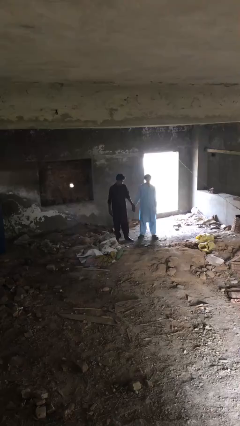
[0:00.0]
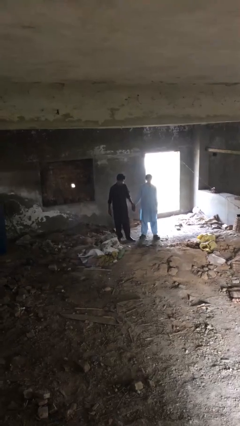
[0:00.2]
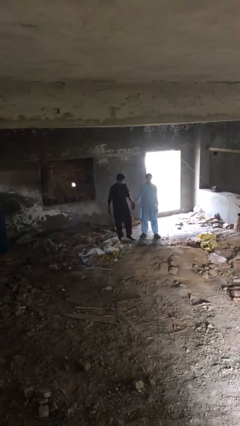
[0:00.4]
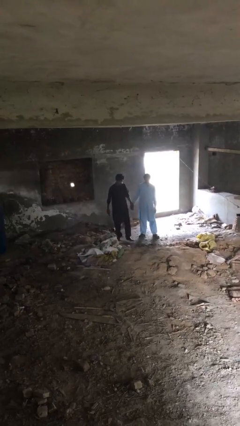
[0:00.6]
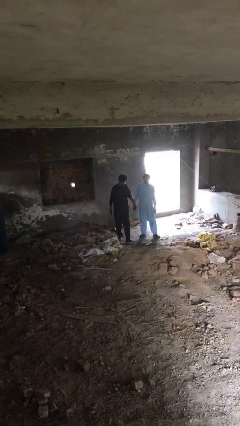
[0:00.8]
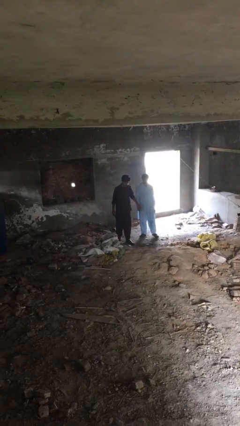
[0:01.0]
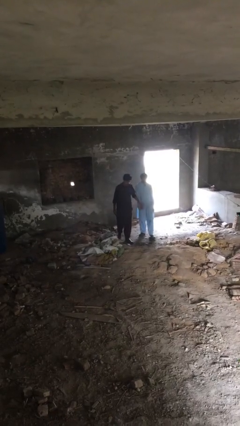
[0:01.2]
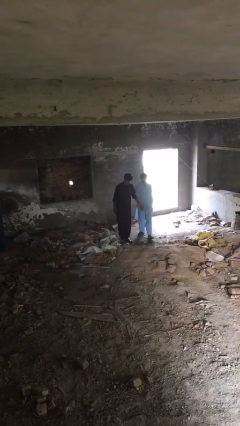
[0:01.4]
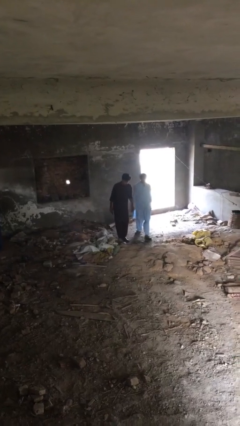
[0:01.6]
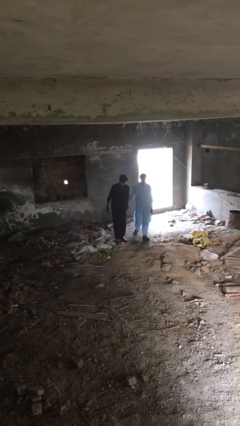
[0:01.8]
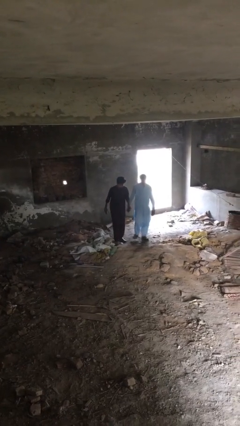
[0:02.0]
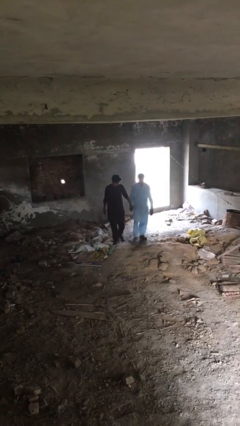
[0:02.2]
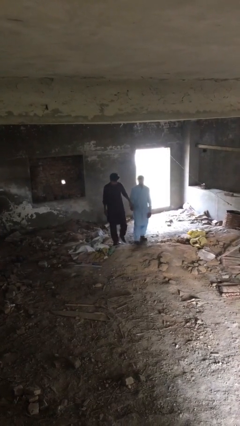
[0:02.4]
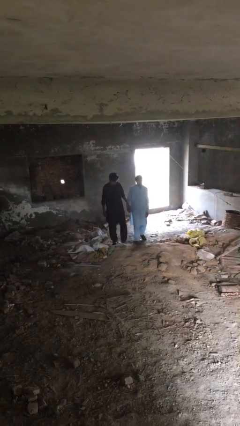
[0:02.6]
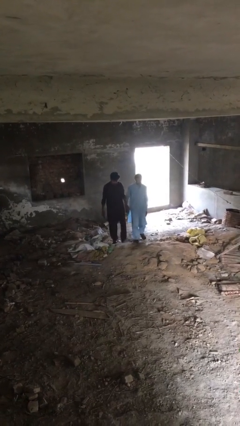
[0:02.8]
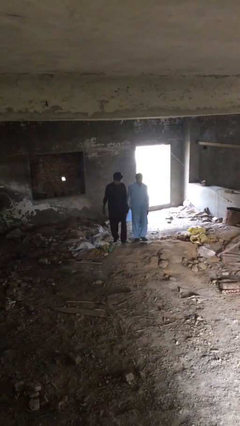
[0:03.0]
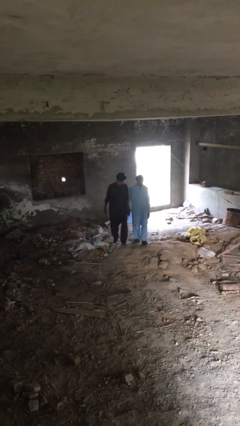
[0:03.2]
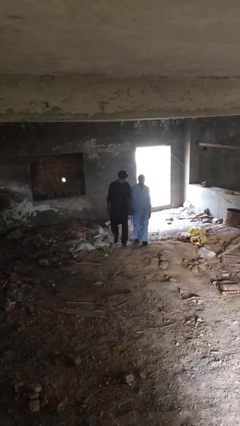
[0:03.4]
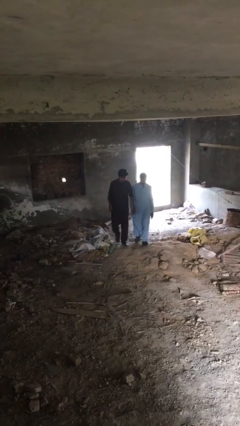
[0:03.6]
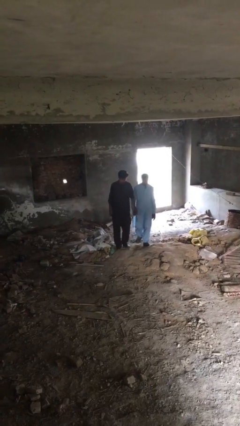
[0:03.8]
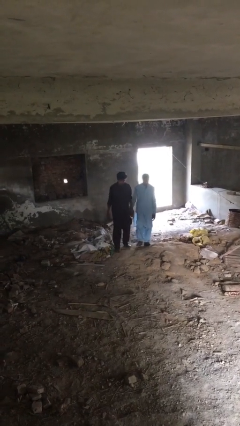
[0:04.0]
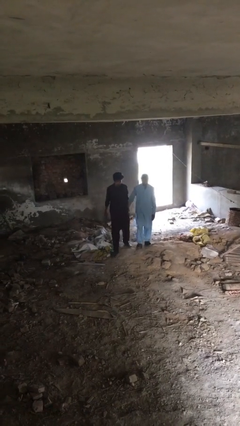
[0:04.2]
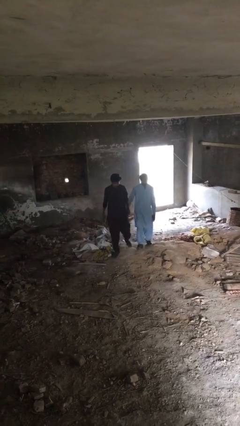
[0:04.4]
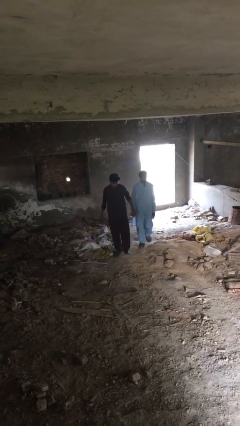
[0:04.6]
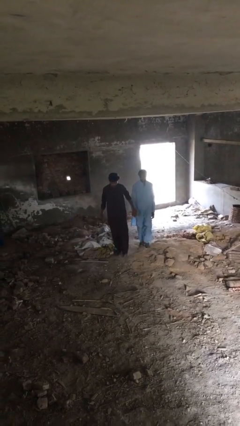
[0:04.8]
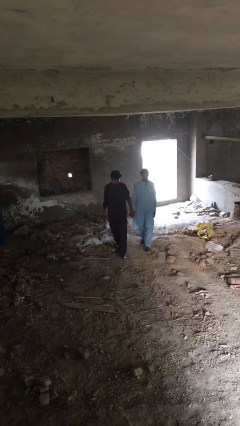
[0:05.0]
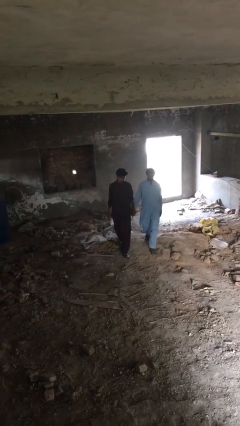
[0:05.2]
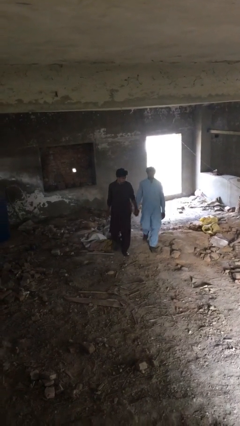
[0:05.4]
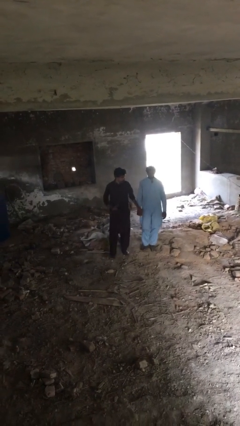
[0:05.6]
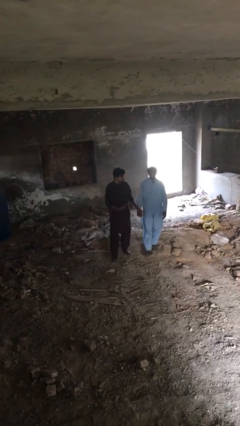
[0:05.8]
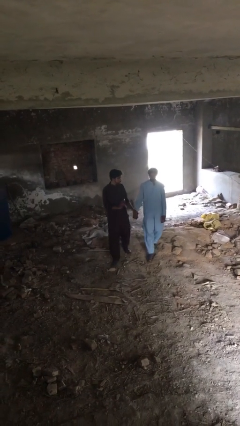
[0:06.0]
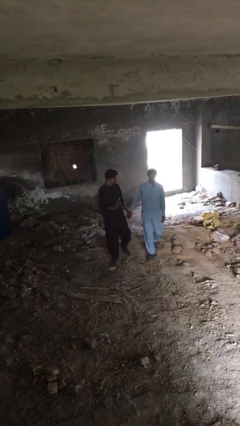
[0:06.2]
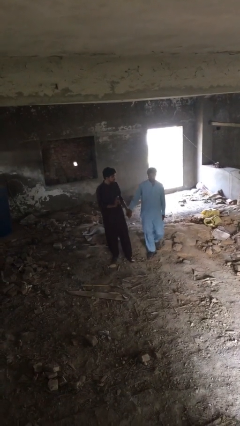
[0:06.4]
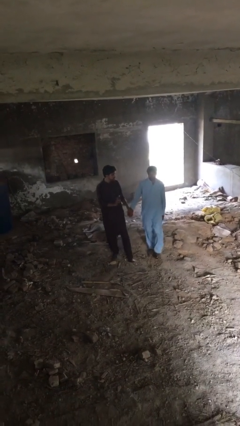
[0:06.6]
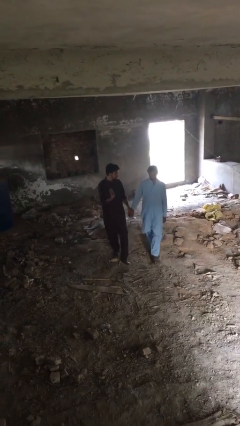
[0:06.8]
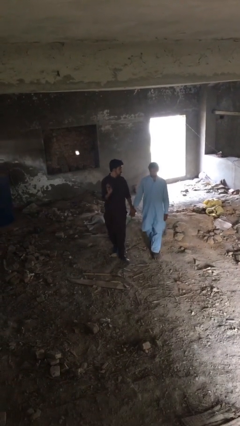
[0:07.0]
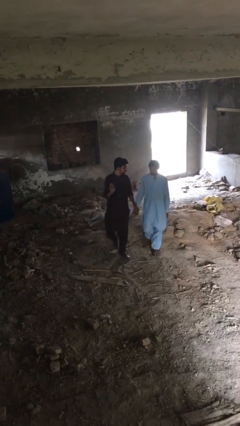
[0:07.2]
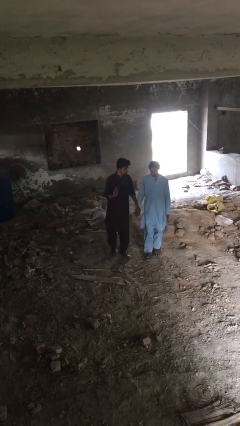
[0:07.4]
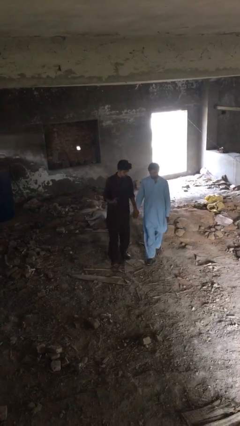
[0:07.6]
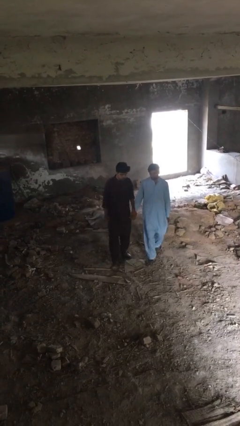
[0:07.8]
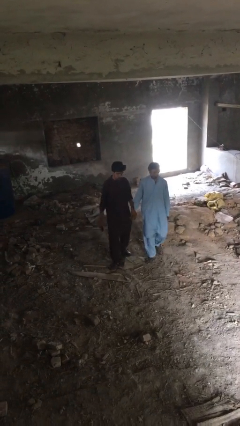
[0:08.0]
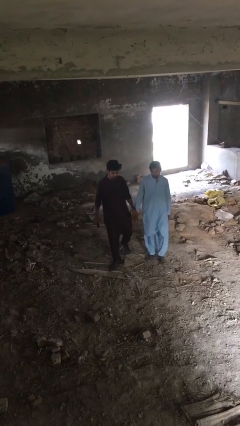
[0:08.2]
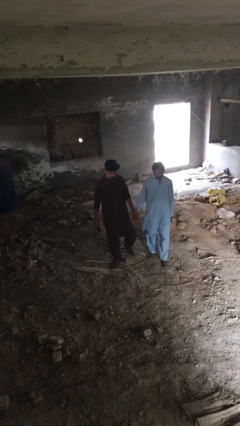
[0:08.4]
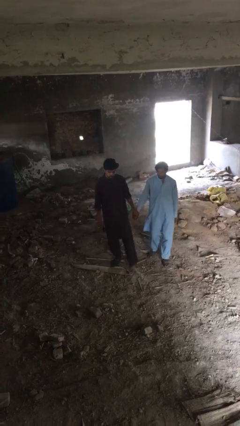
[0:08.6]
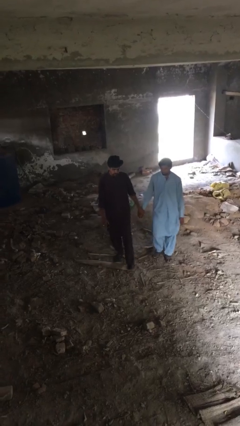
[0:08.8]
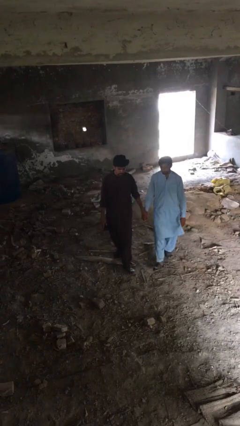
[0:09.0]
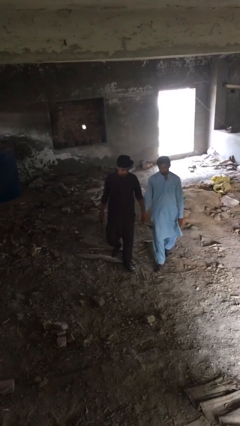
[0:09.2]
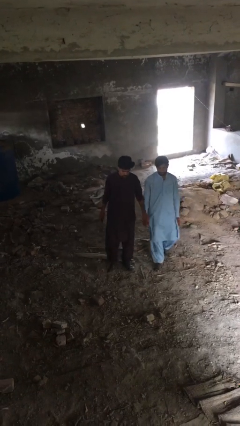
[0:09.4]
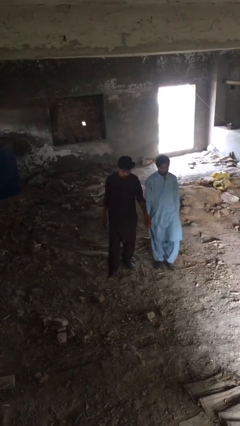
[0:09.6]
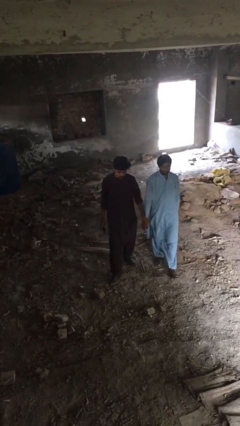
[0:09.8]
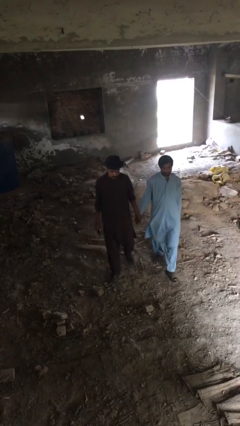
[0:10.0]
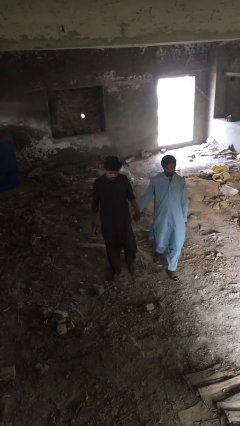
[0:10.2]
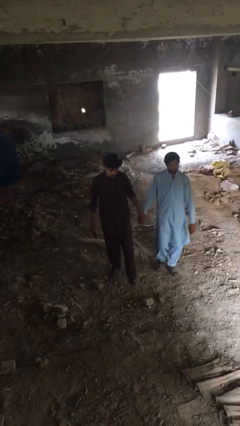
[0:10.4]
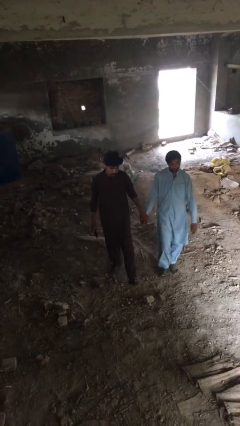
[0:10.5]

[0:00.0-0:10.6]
person holds hand

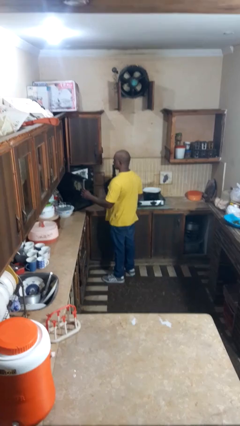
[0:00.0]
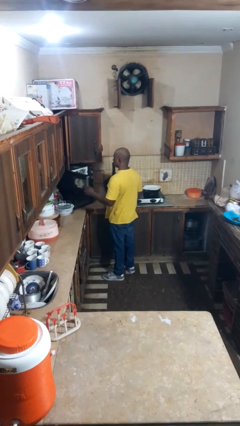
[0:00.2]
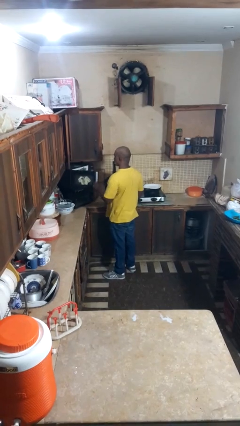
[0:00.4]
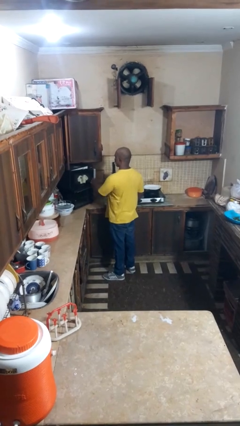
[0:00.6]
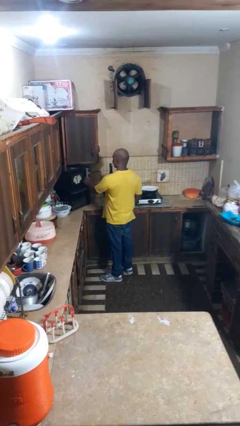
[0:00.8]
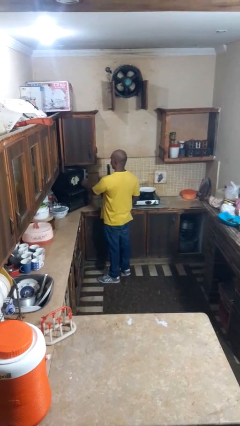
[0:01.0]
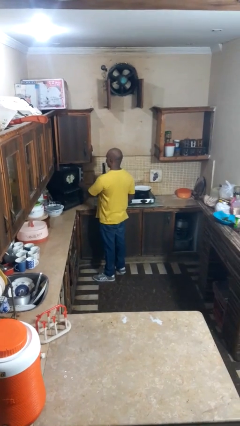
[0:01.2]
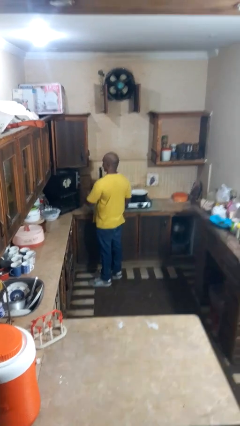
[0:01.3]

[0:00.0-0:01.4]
person closes microwave

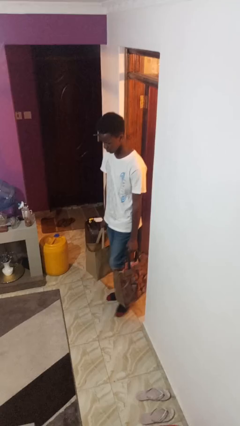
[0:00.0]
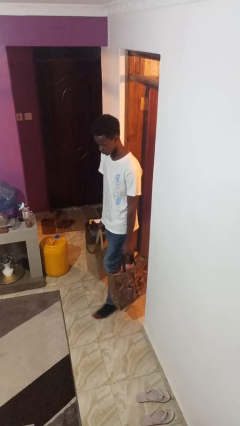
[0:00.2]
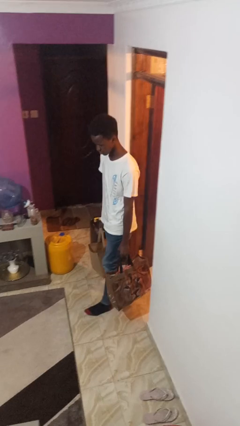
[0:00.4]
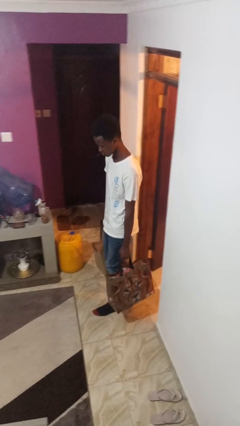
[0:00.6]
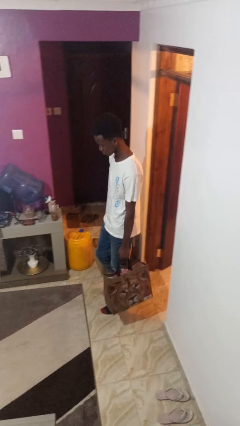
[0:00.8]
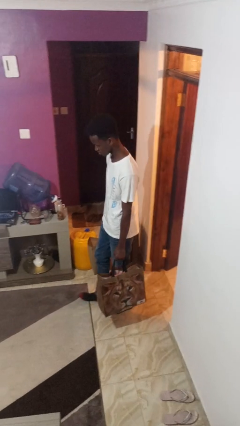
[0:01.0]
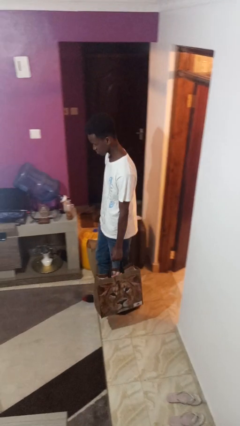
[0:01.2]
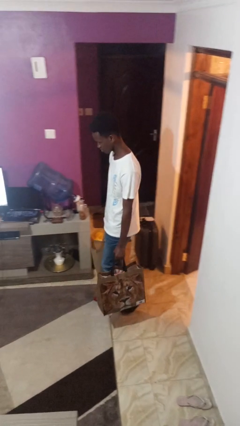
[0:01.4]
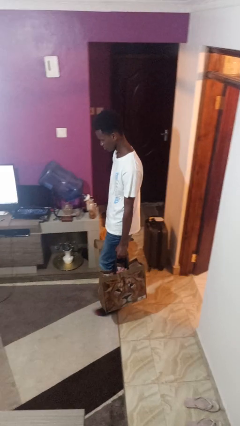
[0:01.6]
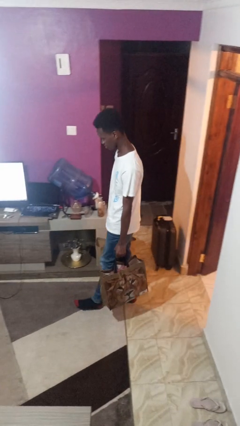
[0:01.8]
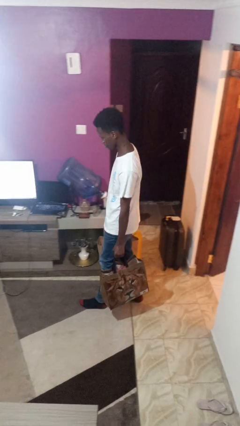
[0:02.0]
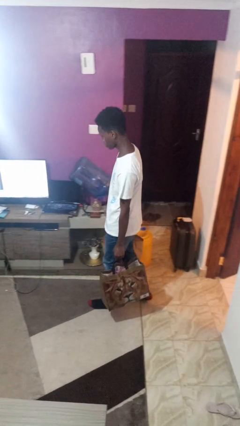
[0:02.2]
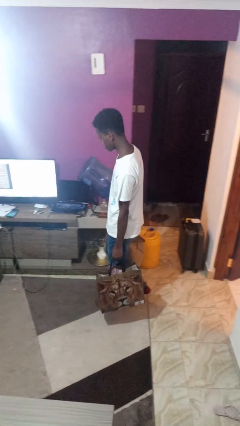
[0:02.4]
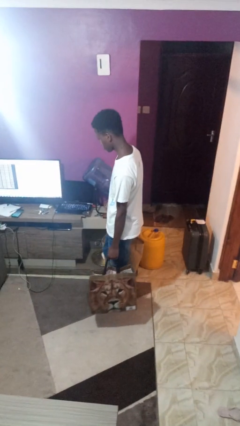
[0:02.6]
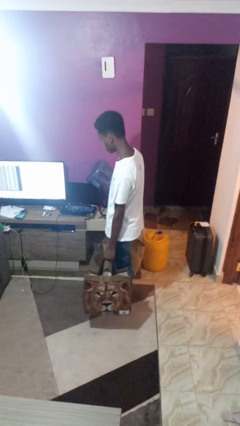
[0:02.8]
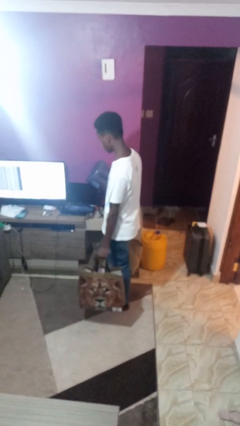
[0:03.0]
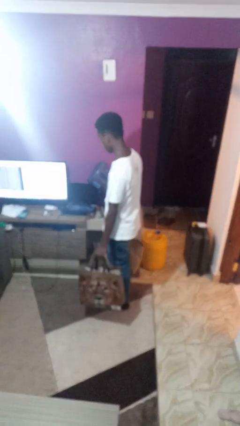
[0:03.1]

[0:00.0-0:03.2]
person carries groceries

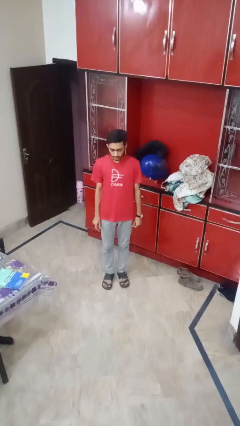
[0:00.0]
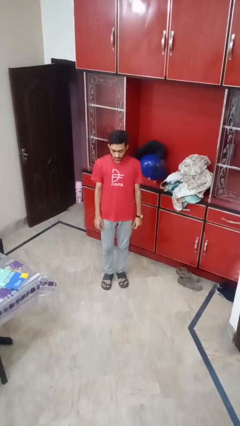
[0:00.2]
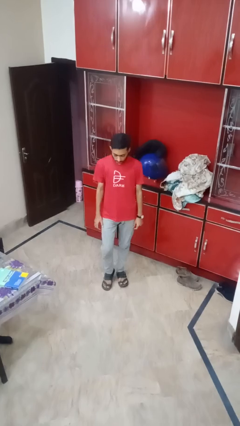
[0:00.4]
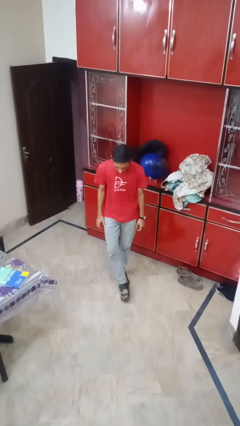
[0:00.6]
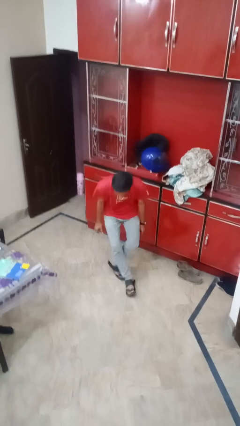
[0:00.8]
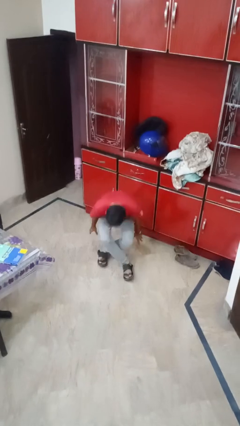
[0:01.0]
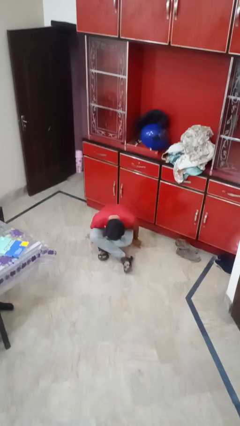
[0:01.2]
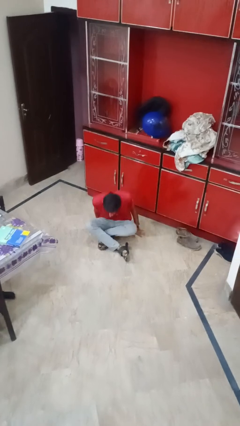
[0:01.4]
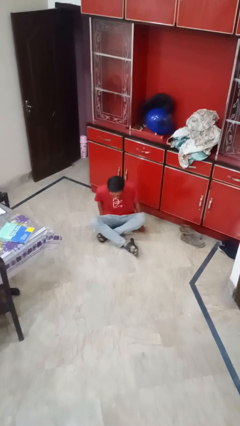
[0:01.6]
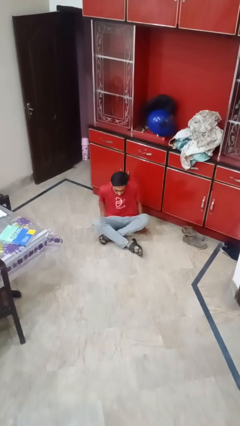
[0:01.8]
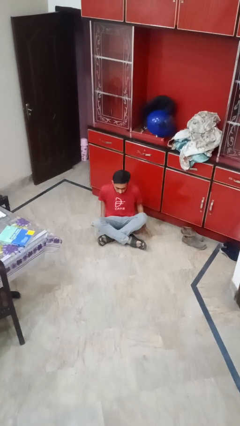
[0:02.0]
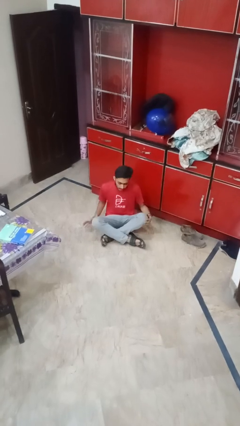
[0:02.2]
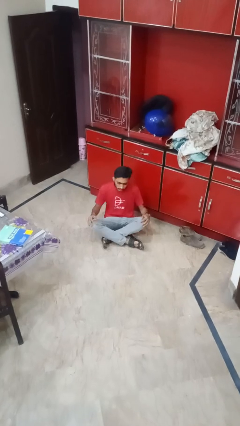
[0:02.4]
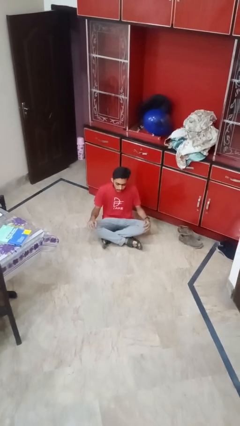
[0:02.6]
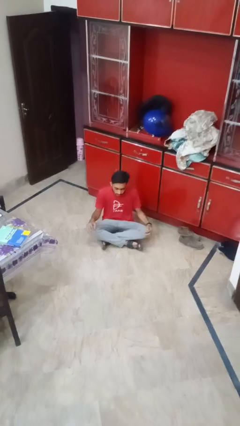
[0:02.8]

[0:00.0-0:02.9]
person sits crisscross
